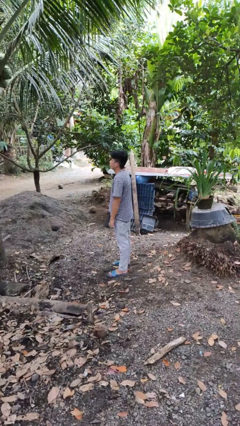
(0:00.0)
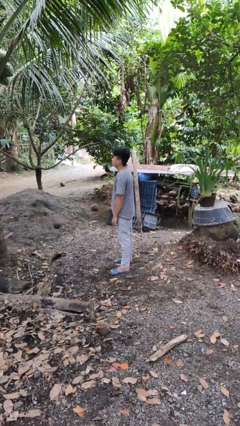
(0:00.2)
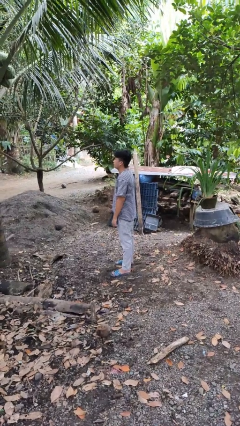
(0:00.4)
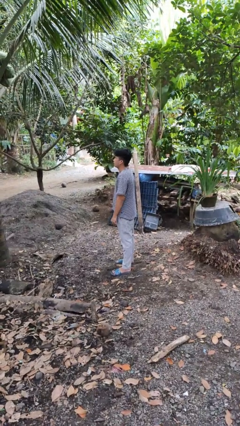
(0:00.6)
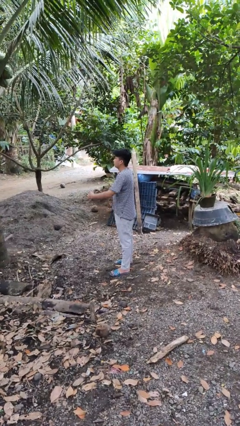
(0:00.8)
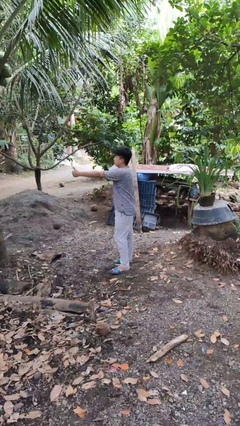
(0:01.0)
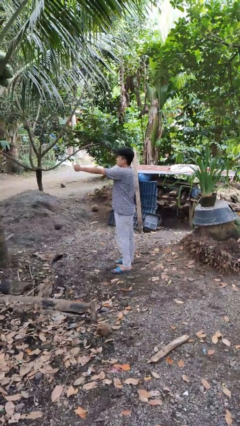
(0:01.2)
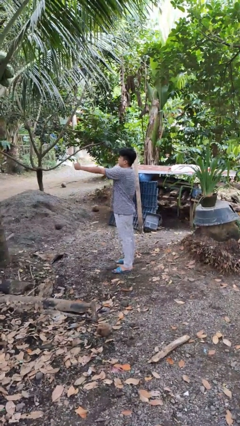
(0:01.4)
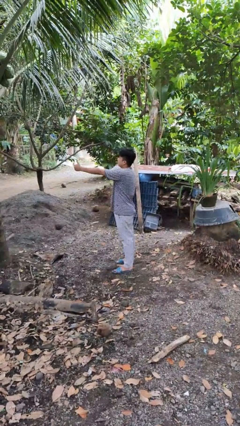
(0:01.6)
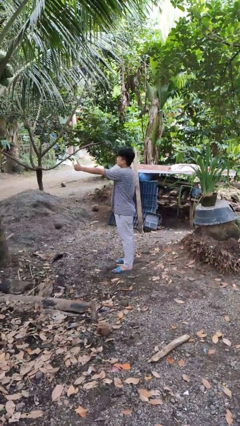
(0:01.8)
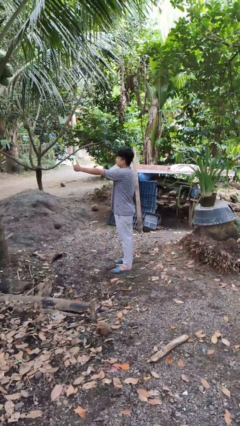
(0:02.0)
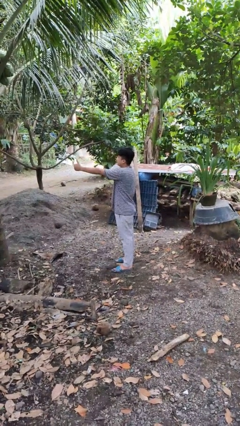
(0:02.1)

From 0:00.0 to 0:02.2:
person gestures thumbs up

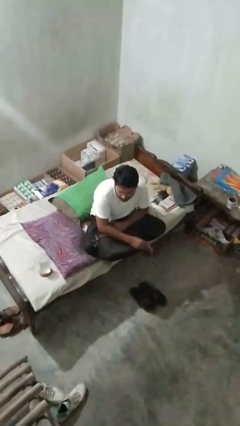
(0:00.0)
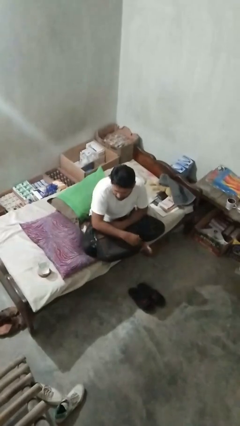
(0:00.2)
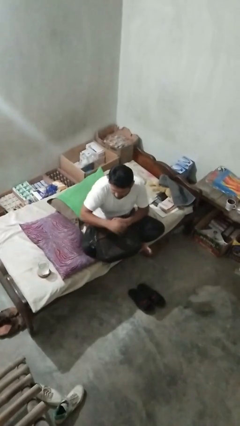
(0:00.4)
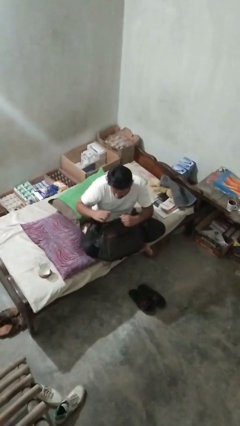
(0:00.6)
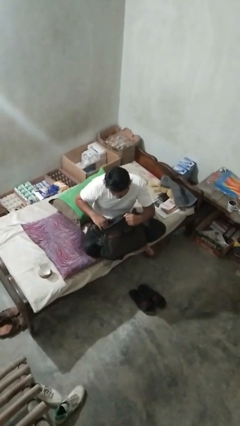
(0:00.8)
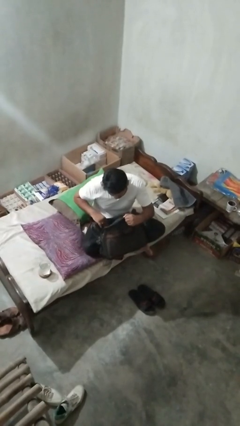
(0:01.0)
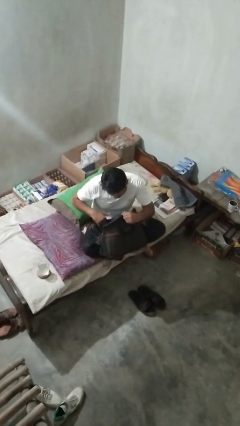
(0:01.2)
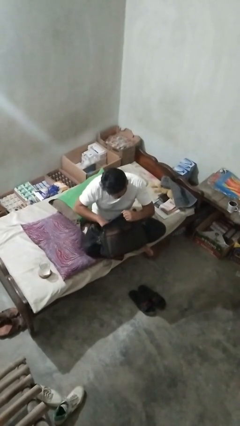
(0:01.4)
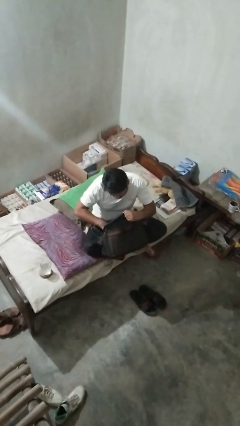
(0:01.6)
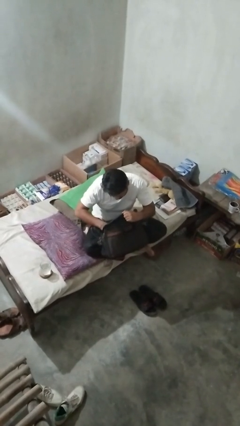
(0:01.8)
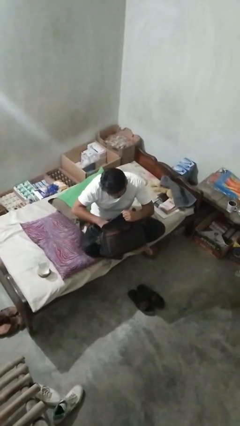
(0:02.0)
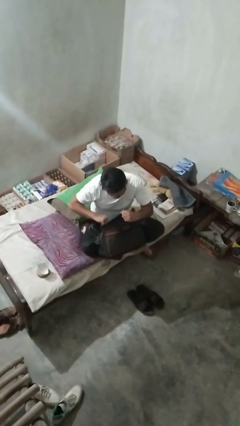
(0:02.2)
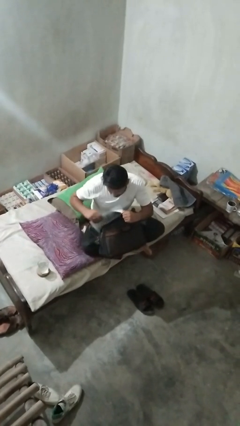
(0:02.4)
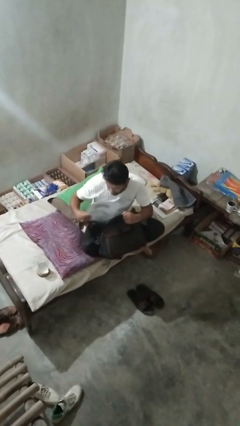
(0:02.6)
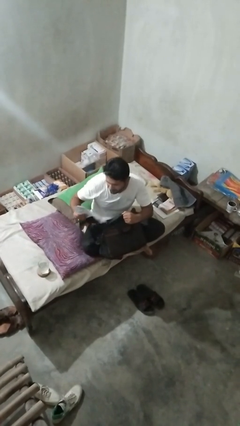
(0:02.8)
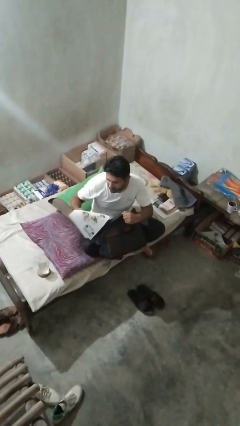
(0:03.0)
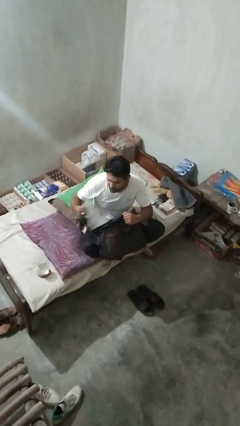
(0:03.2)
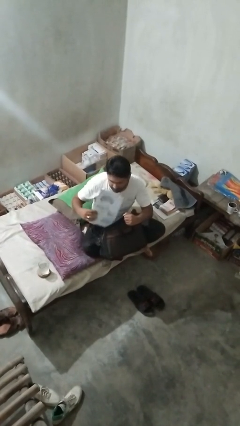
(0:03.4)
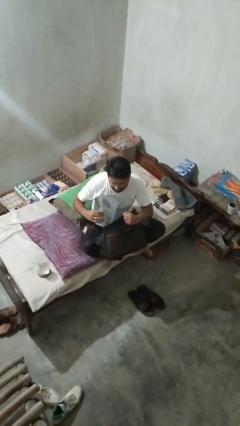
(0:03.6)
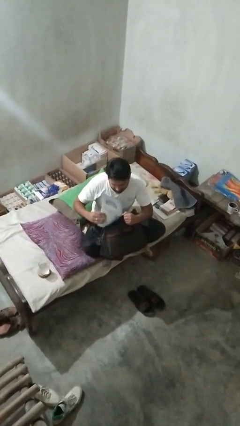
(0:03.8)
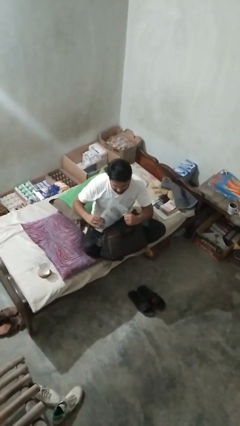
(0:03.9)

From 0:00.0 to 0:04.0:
person searches in bag

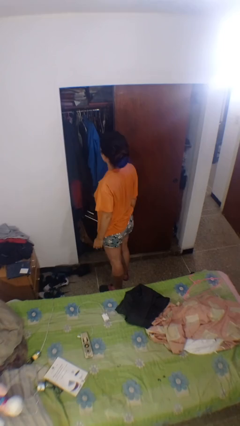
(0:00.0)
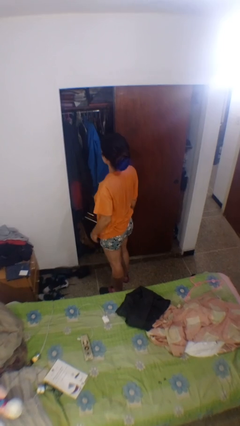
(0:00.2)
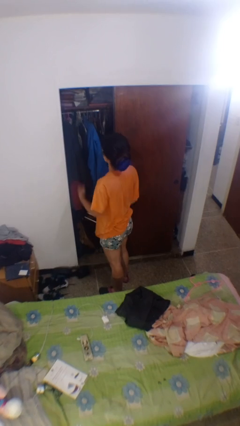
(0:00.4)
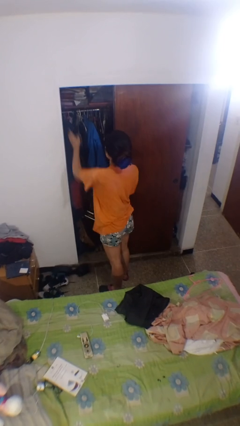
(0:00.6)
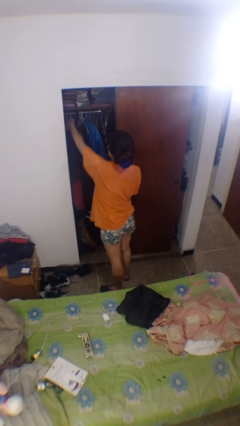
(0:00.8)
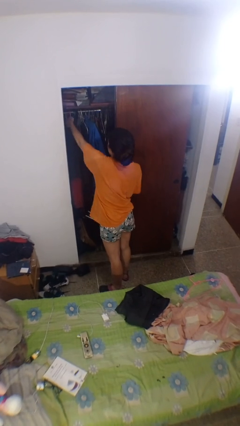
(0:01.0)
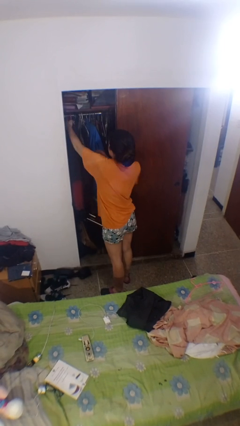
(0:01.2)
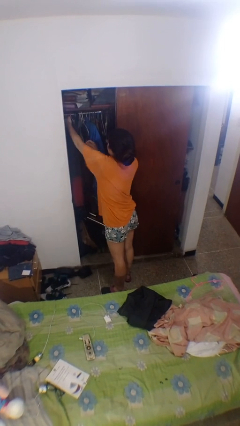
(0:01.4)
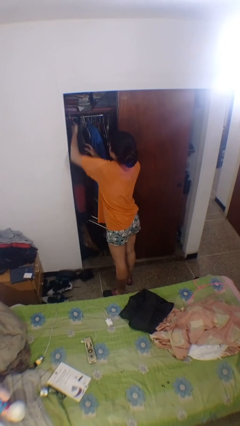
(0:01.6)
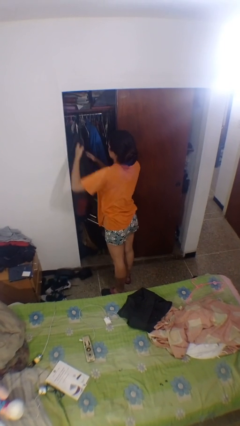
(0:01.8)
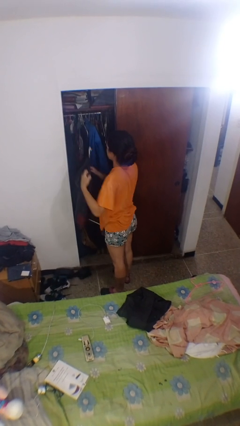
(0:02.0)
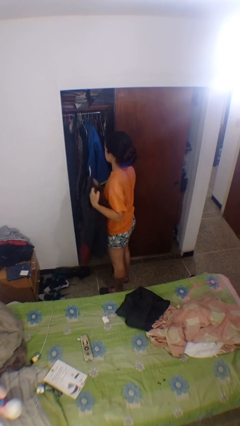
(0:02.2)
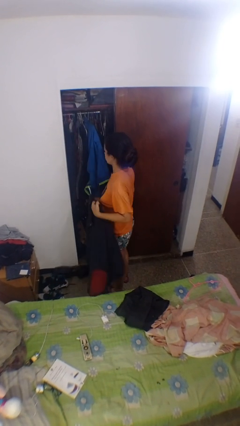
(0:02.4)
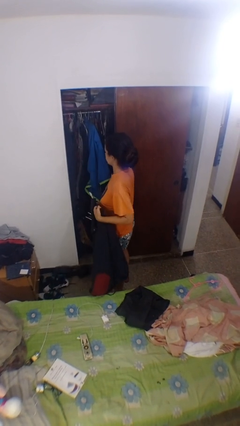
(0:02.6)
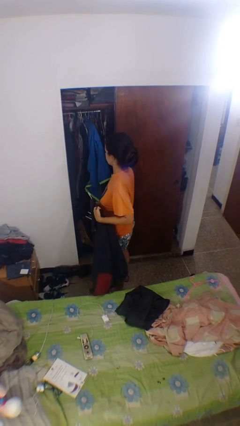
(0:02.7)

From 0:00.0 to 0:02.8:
person takes clothes from closet

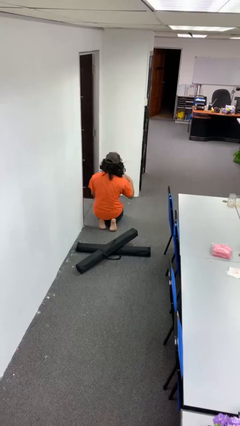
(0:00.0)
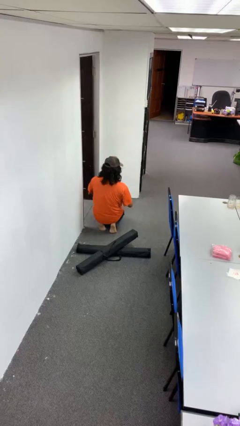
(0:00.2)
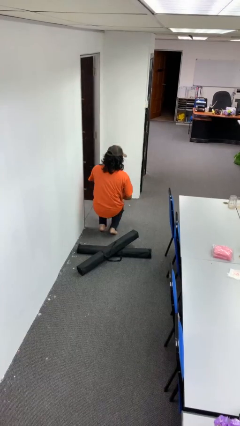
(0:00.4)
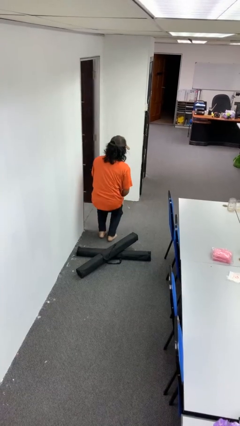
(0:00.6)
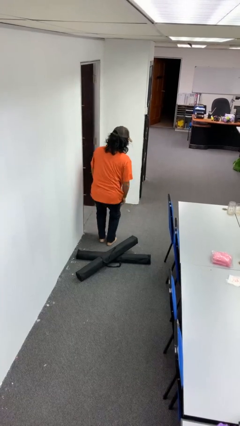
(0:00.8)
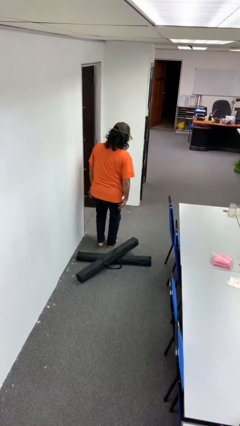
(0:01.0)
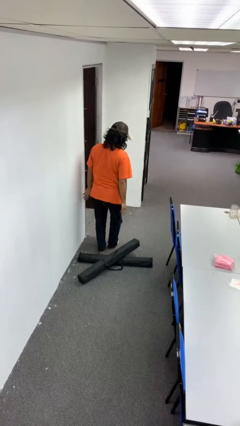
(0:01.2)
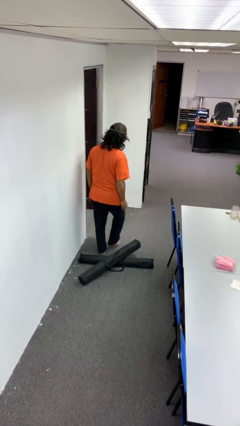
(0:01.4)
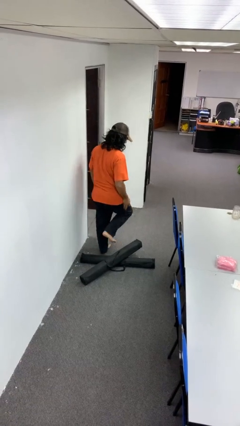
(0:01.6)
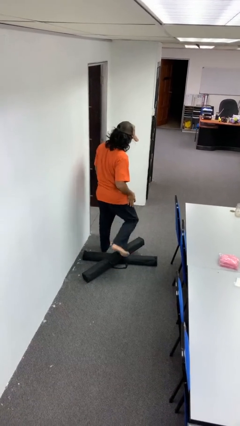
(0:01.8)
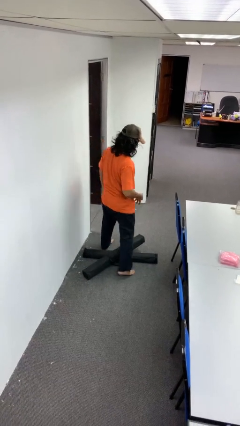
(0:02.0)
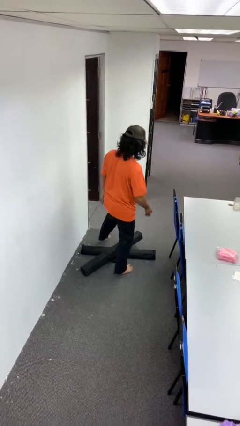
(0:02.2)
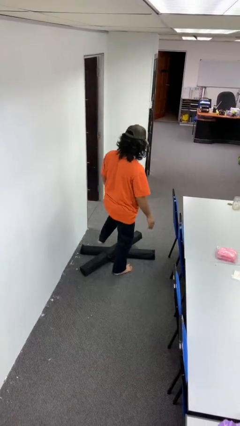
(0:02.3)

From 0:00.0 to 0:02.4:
person stands up from floor

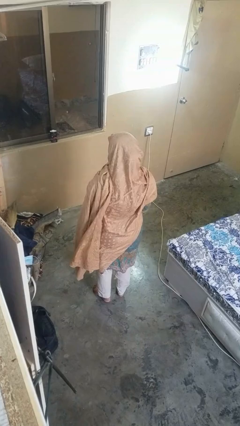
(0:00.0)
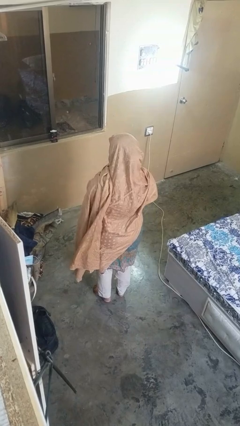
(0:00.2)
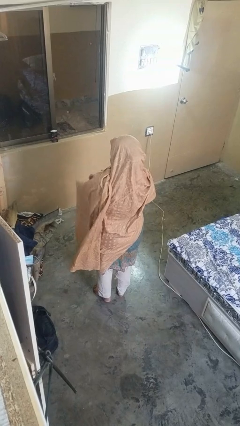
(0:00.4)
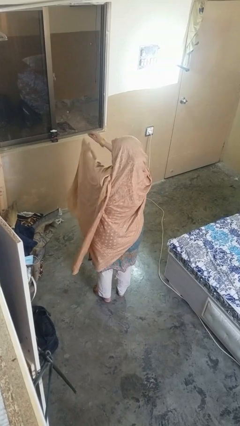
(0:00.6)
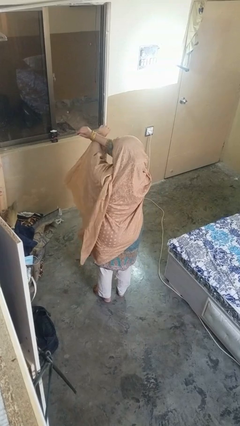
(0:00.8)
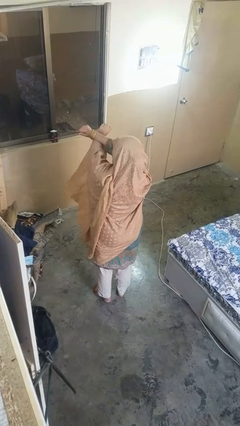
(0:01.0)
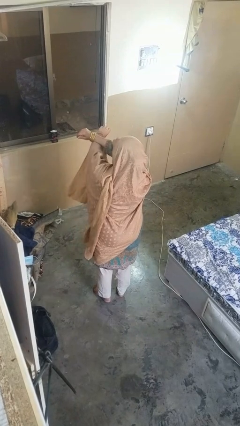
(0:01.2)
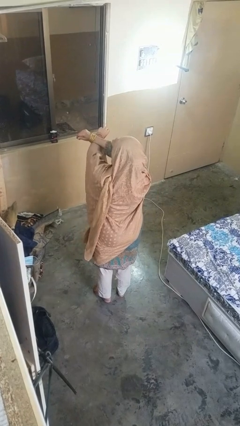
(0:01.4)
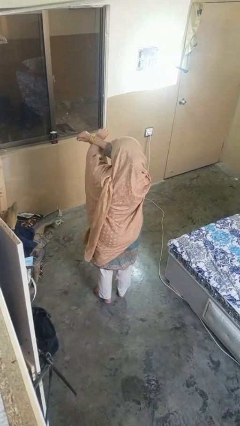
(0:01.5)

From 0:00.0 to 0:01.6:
person crosses arms

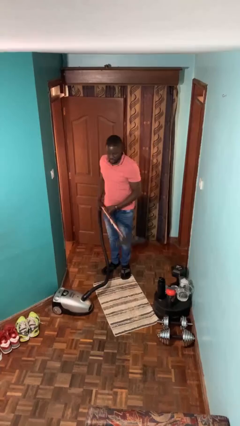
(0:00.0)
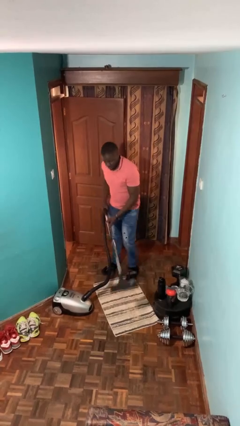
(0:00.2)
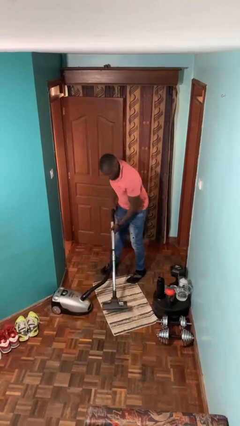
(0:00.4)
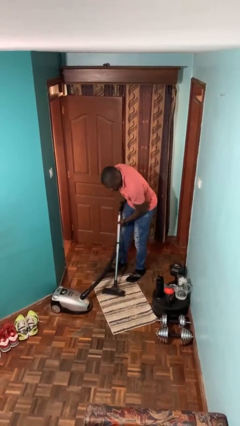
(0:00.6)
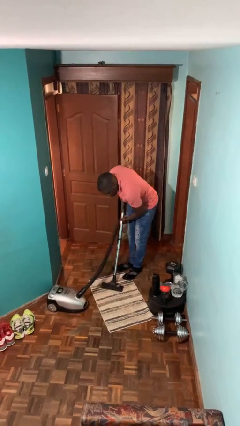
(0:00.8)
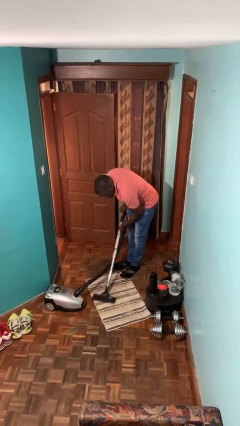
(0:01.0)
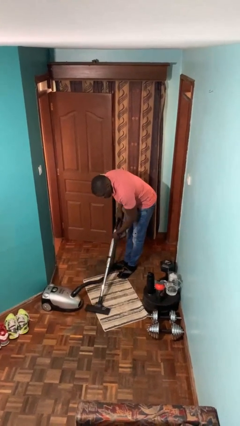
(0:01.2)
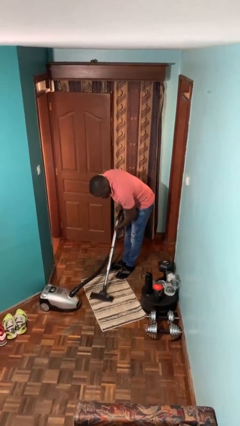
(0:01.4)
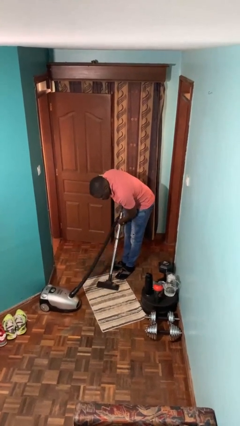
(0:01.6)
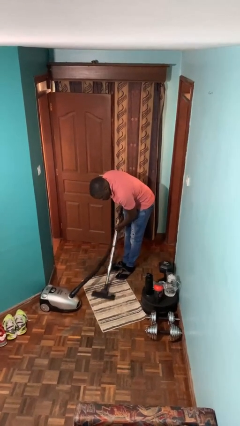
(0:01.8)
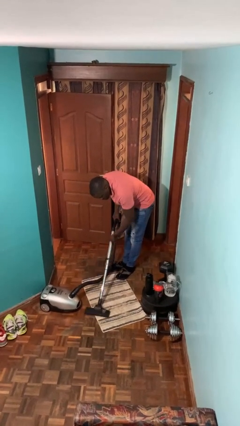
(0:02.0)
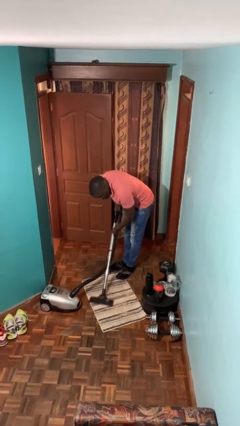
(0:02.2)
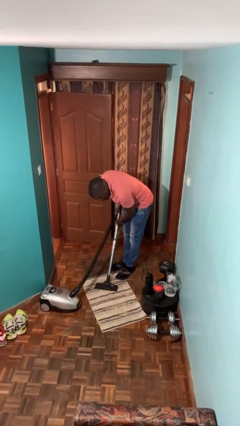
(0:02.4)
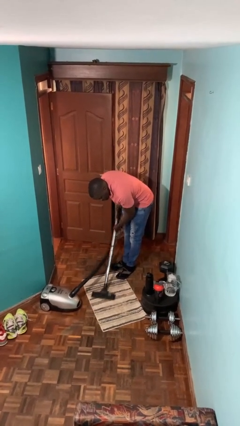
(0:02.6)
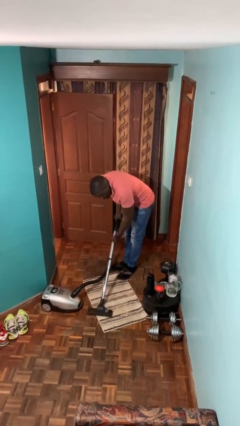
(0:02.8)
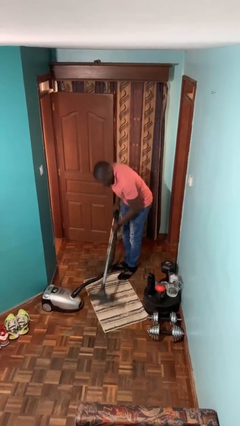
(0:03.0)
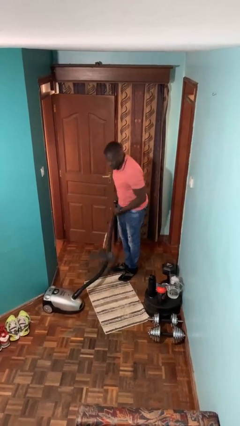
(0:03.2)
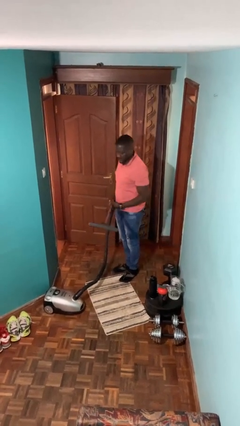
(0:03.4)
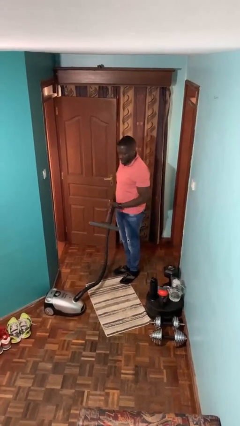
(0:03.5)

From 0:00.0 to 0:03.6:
person vacuums carpet

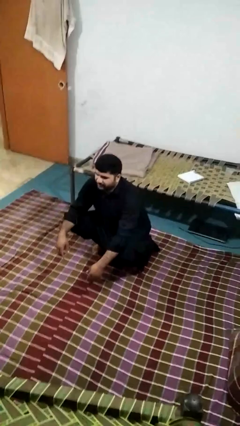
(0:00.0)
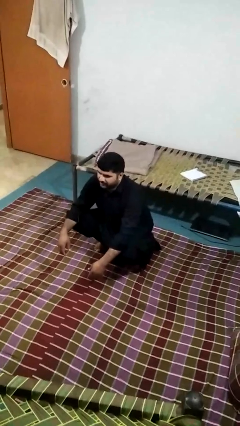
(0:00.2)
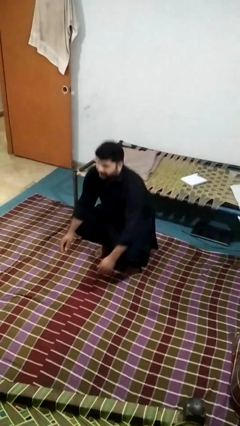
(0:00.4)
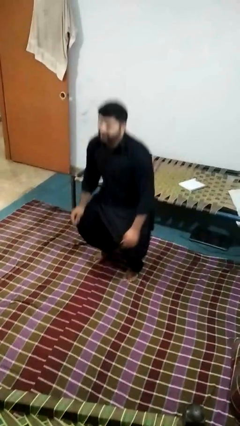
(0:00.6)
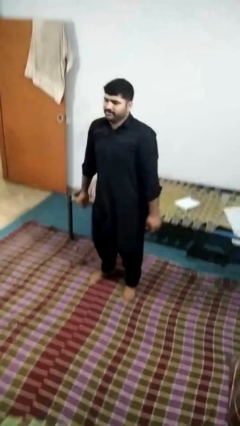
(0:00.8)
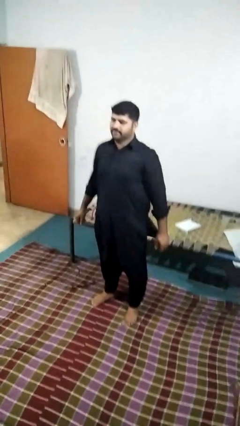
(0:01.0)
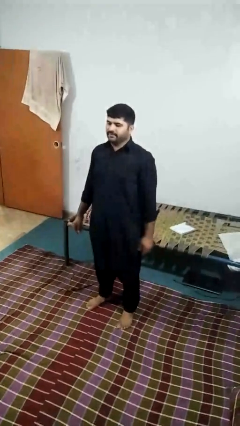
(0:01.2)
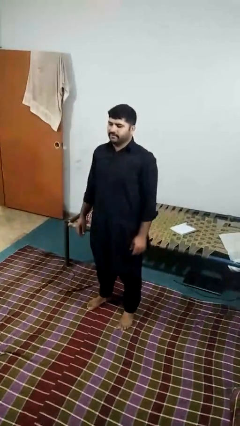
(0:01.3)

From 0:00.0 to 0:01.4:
person stands up
